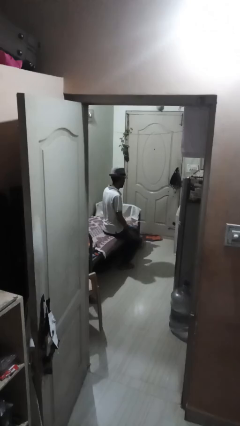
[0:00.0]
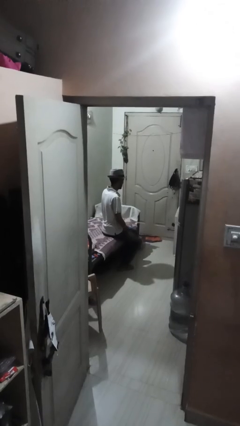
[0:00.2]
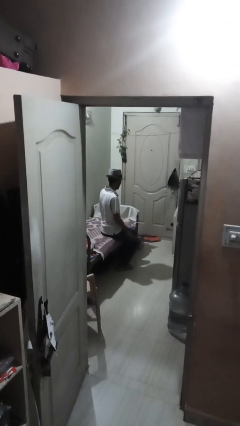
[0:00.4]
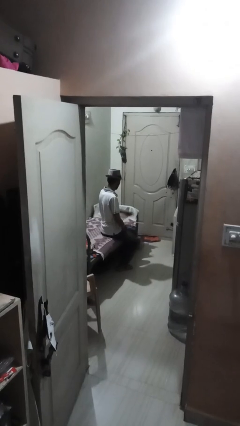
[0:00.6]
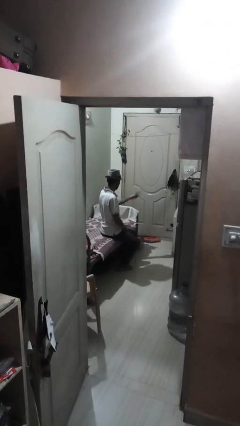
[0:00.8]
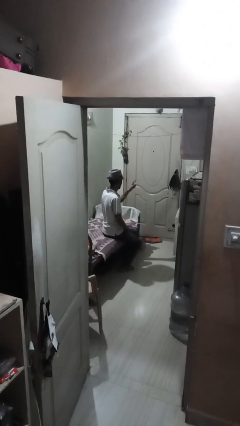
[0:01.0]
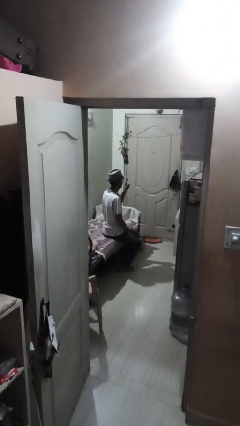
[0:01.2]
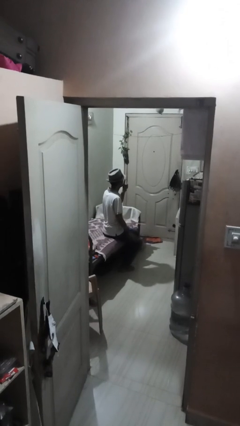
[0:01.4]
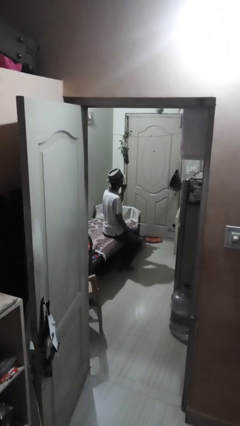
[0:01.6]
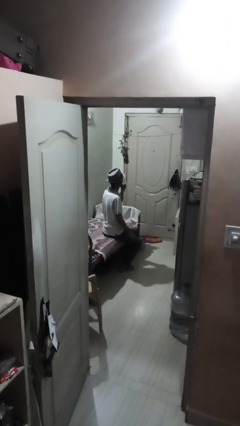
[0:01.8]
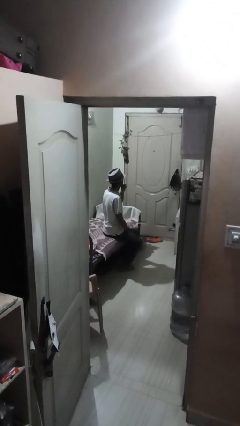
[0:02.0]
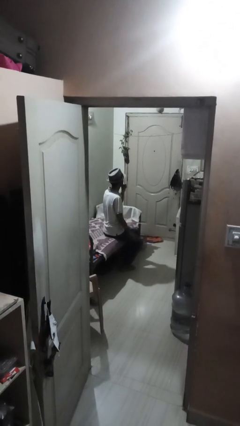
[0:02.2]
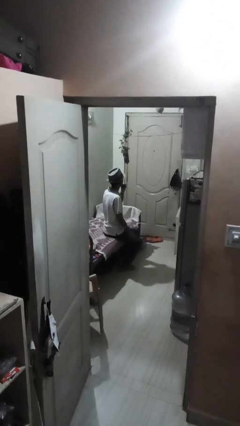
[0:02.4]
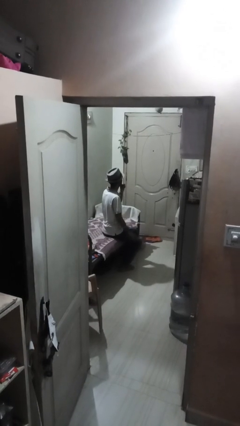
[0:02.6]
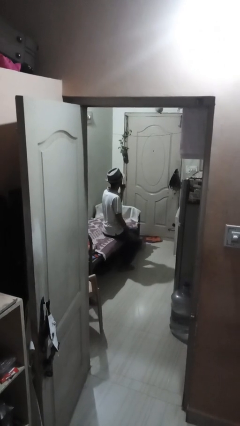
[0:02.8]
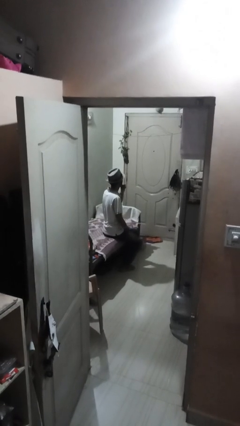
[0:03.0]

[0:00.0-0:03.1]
person gestures be quiet

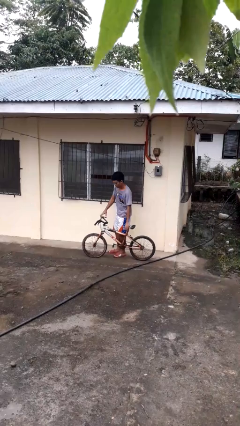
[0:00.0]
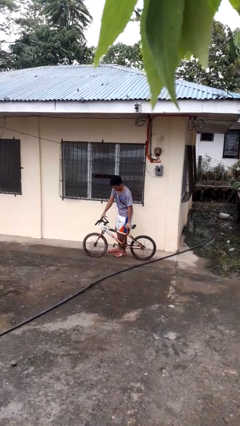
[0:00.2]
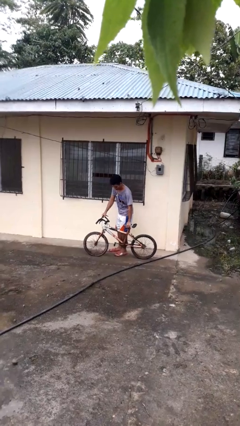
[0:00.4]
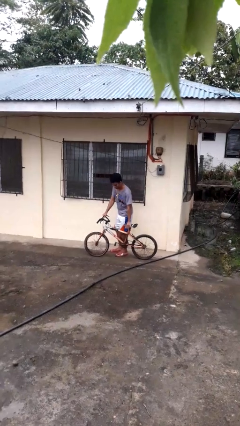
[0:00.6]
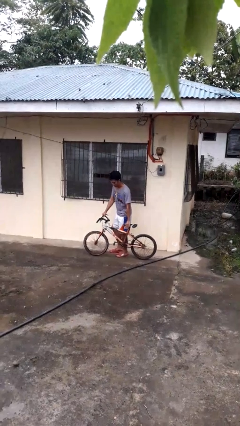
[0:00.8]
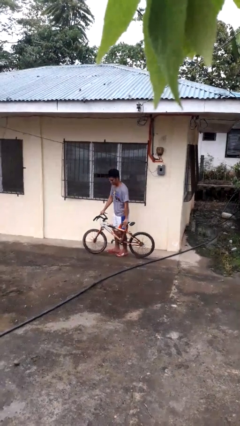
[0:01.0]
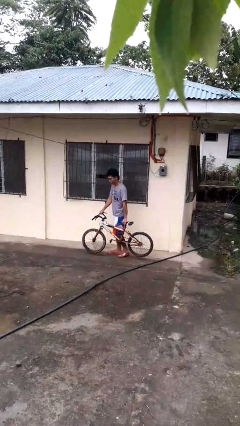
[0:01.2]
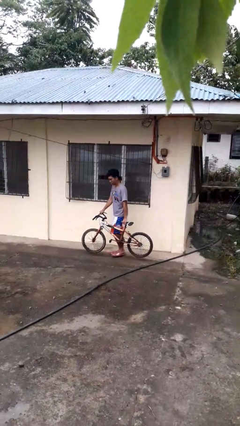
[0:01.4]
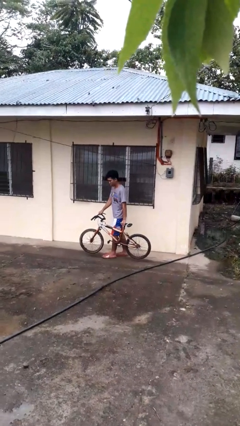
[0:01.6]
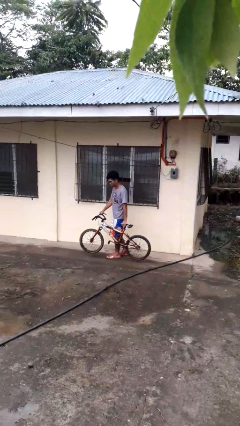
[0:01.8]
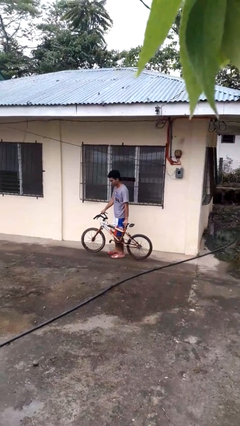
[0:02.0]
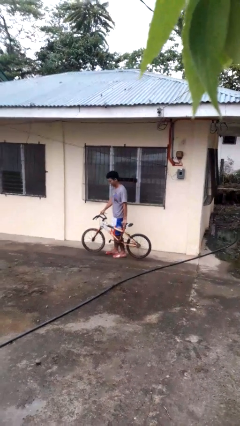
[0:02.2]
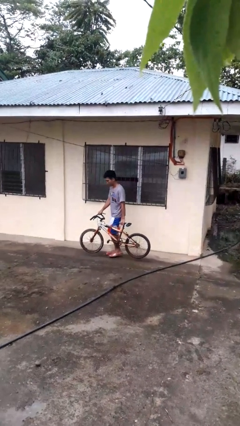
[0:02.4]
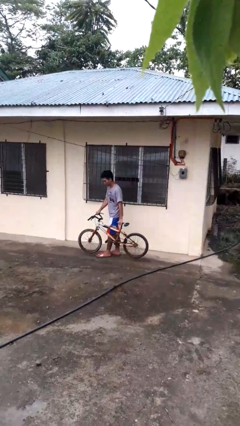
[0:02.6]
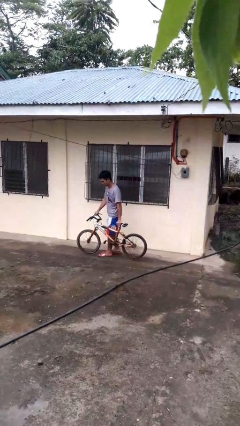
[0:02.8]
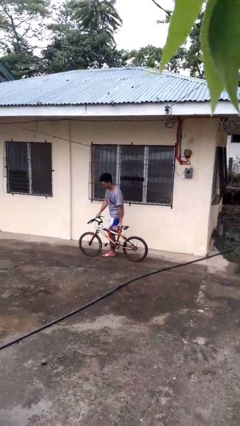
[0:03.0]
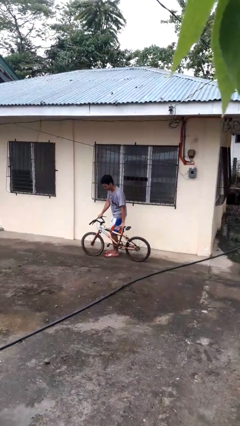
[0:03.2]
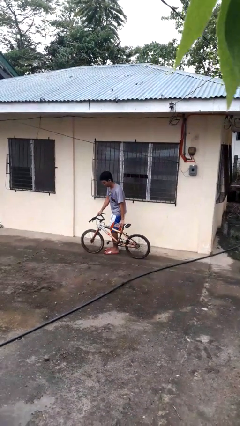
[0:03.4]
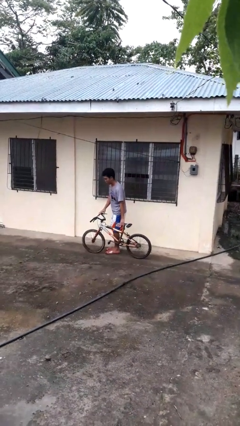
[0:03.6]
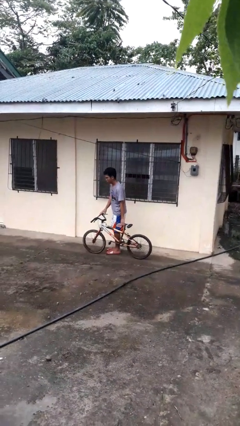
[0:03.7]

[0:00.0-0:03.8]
person carries bicycle

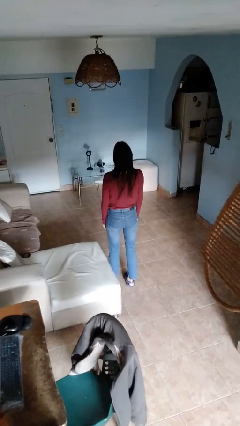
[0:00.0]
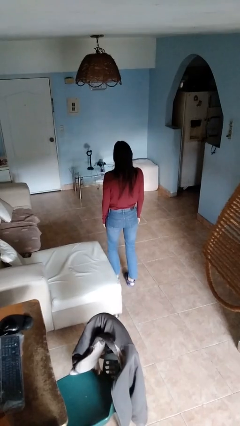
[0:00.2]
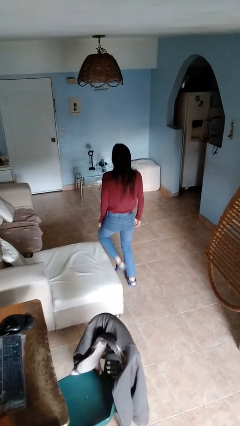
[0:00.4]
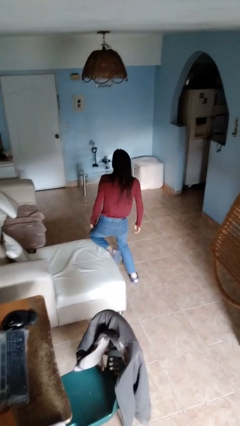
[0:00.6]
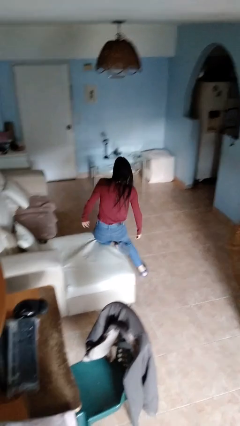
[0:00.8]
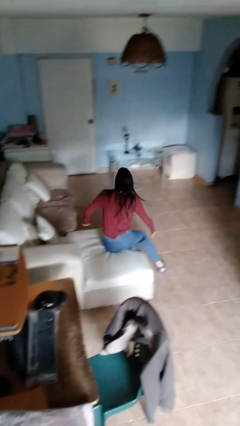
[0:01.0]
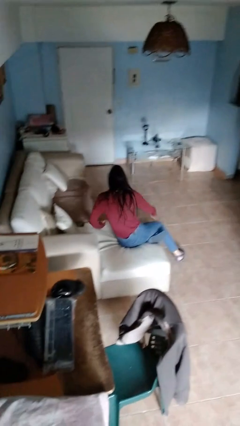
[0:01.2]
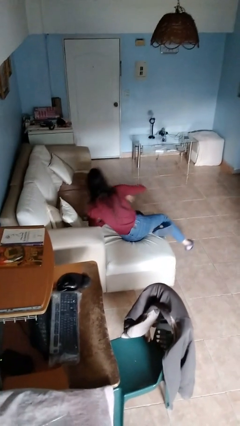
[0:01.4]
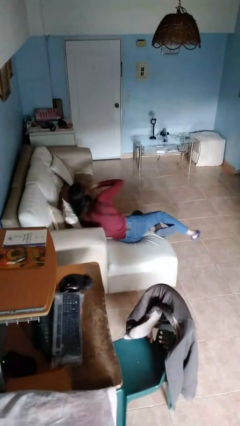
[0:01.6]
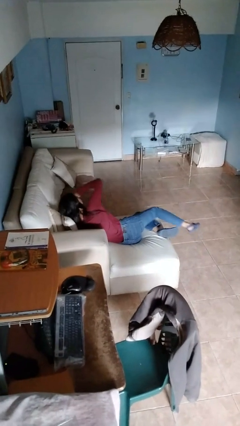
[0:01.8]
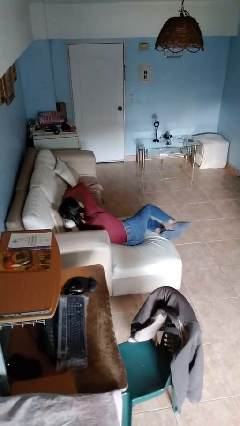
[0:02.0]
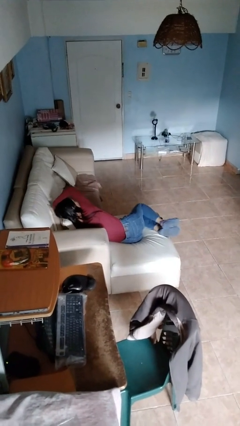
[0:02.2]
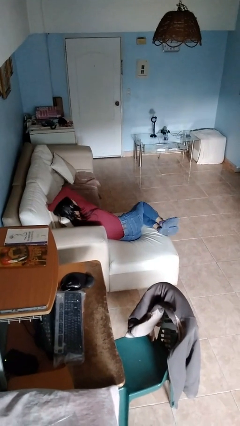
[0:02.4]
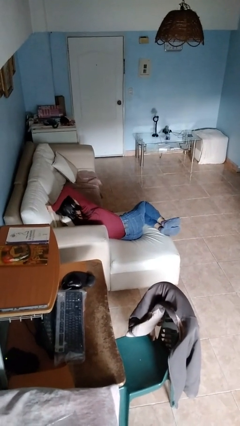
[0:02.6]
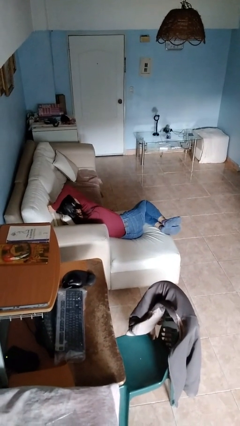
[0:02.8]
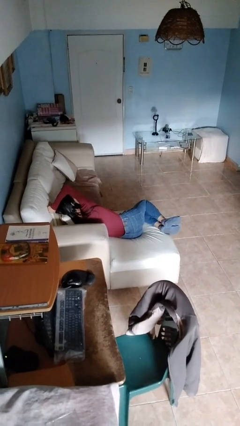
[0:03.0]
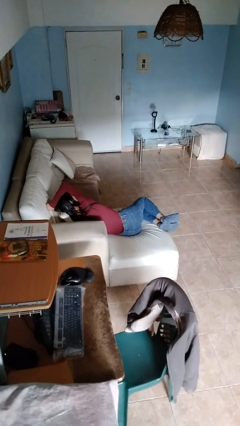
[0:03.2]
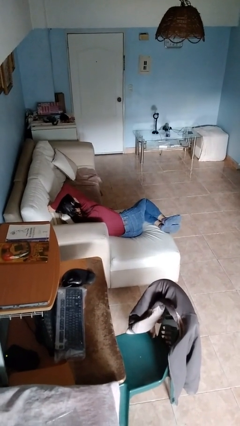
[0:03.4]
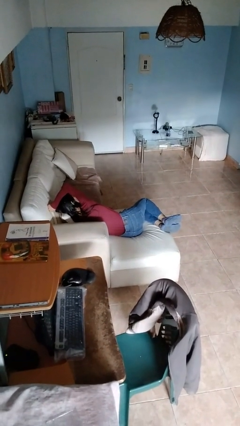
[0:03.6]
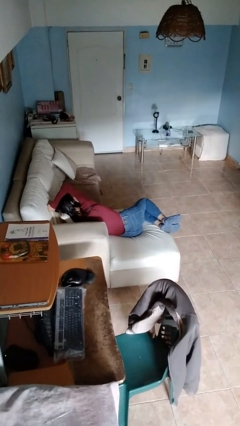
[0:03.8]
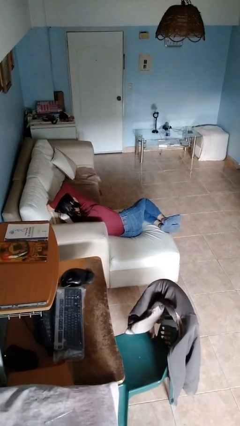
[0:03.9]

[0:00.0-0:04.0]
person lies down on couch

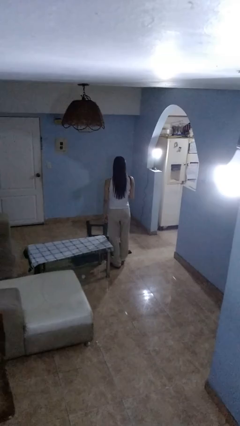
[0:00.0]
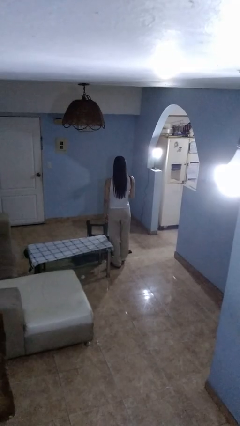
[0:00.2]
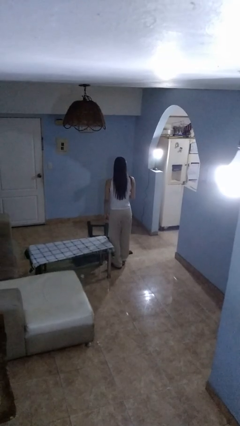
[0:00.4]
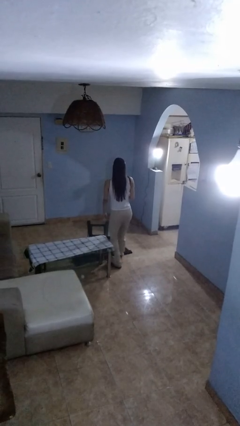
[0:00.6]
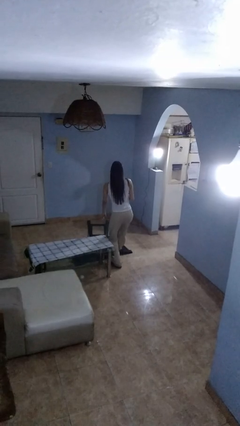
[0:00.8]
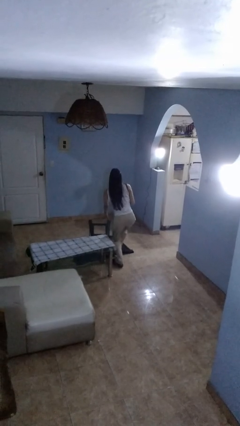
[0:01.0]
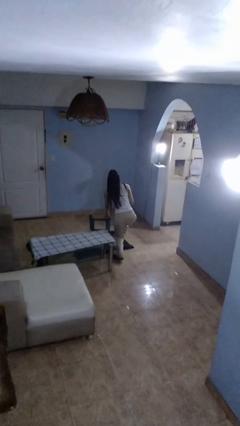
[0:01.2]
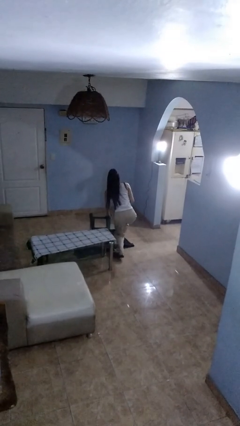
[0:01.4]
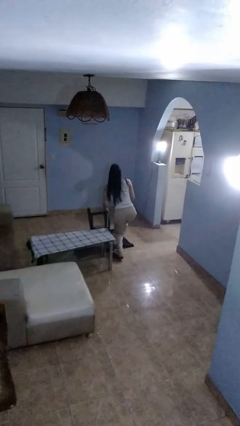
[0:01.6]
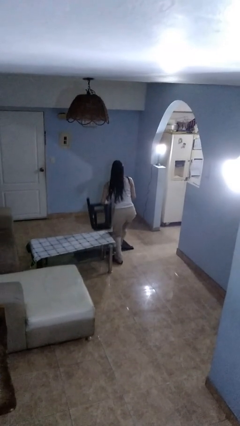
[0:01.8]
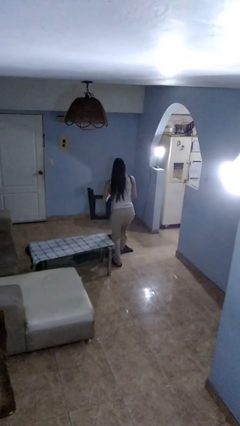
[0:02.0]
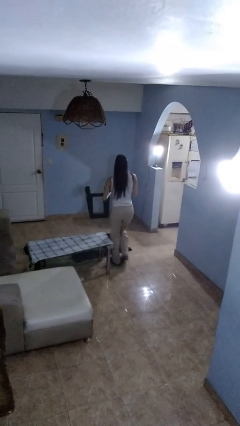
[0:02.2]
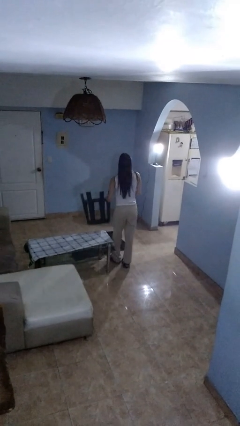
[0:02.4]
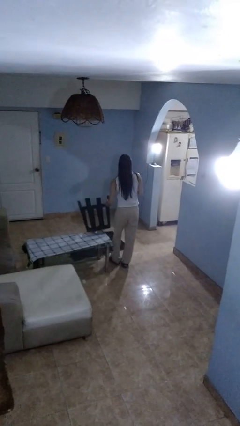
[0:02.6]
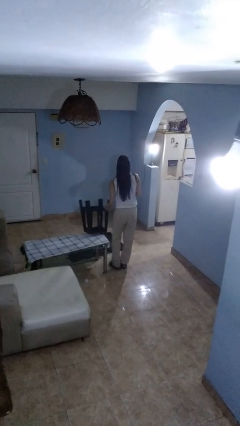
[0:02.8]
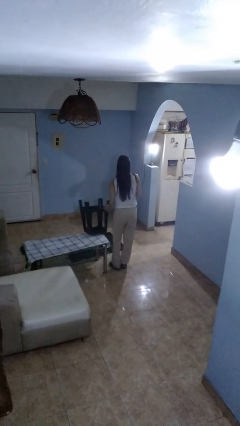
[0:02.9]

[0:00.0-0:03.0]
person sets upright furniture

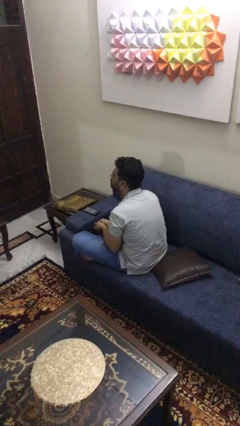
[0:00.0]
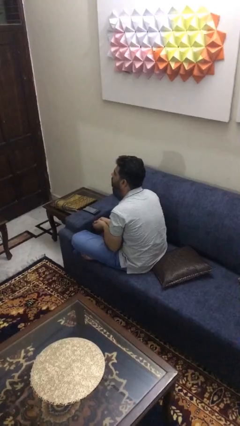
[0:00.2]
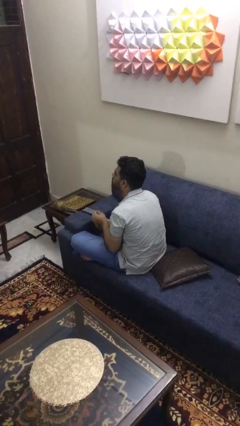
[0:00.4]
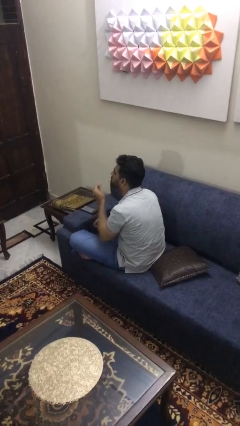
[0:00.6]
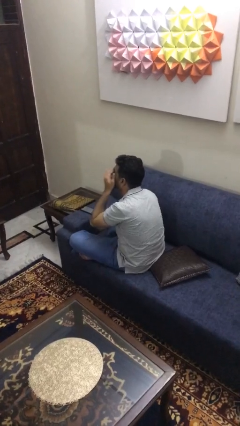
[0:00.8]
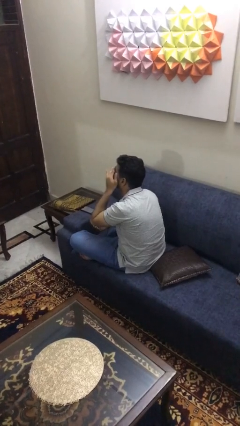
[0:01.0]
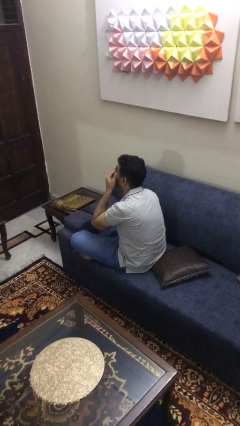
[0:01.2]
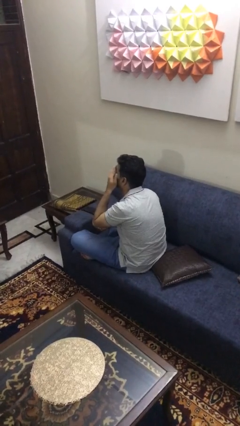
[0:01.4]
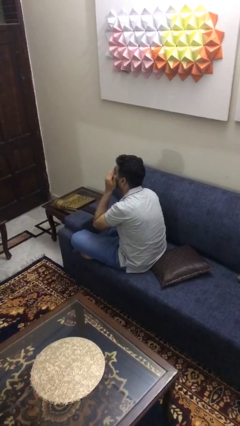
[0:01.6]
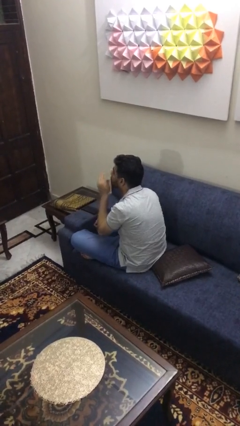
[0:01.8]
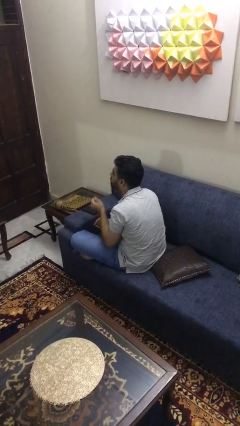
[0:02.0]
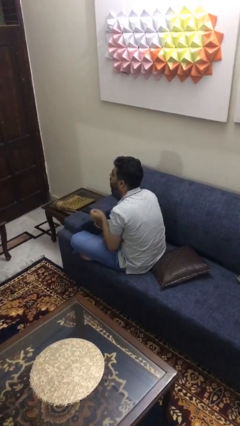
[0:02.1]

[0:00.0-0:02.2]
person rubs eyes

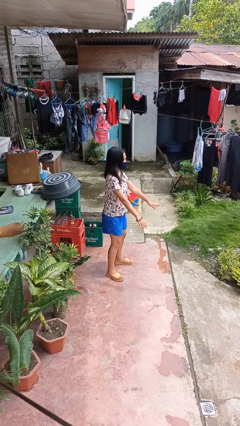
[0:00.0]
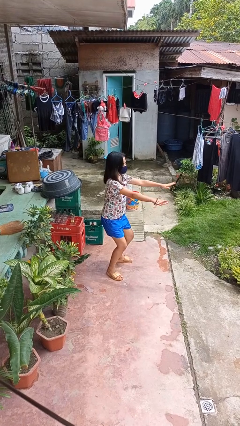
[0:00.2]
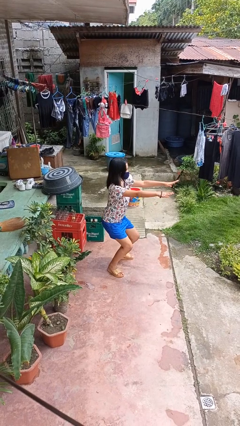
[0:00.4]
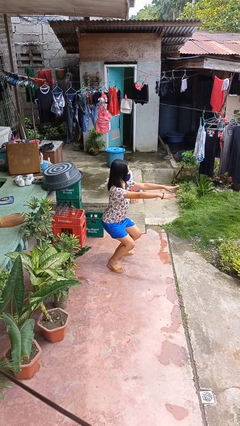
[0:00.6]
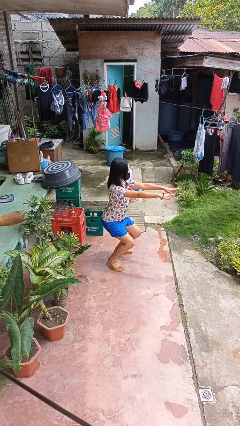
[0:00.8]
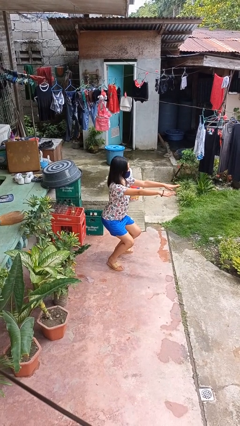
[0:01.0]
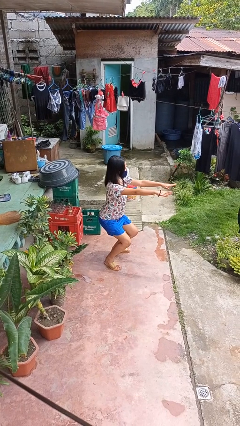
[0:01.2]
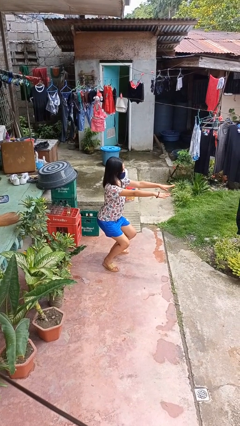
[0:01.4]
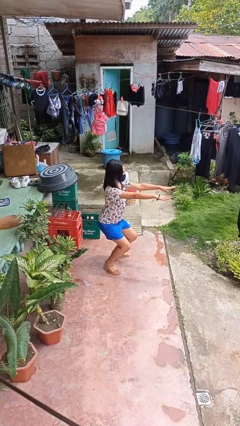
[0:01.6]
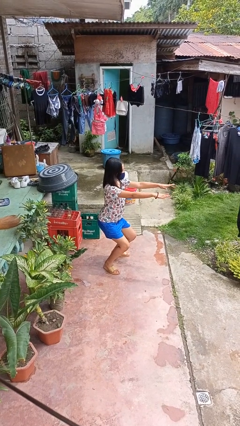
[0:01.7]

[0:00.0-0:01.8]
person squats
